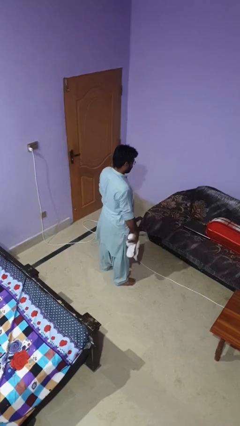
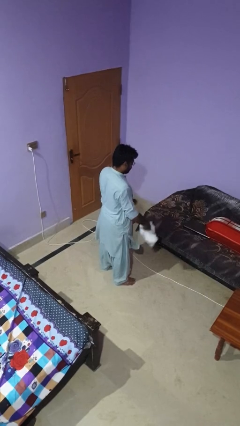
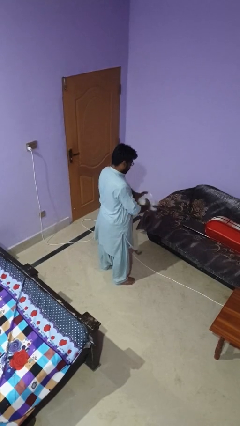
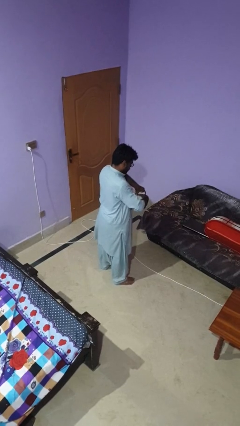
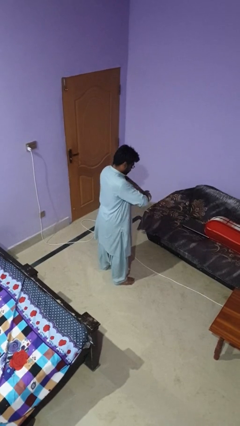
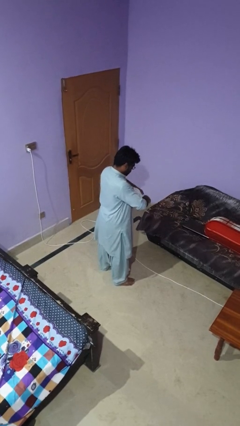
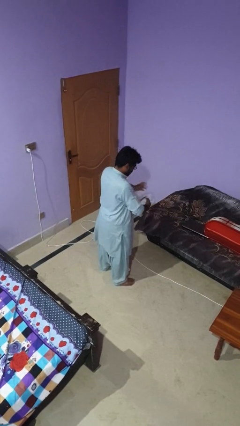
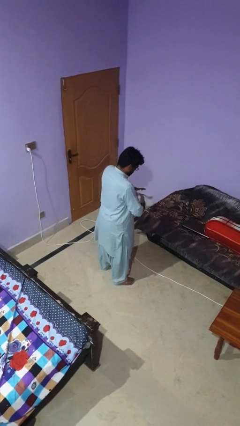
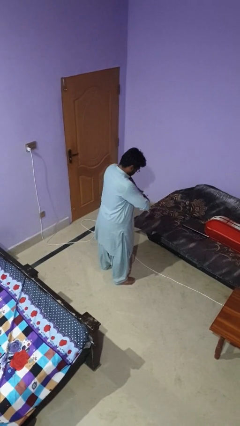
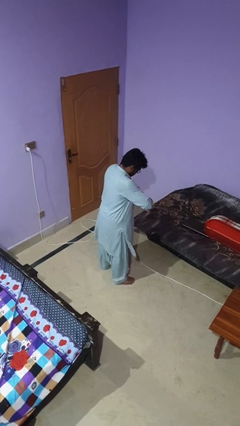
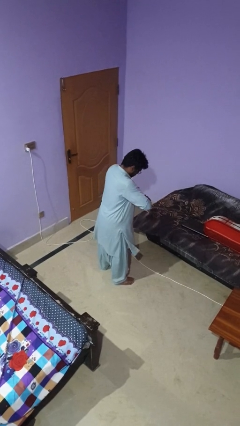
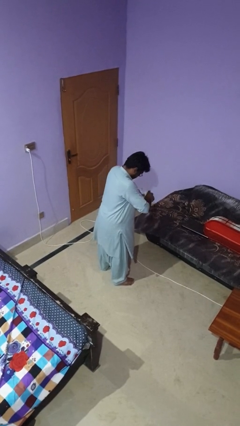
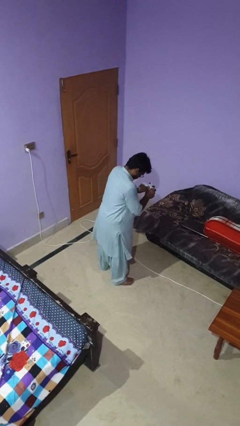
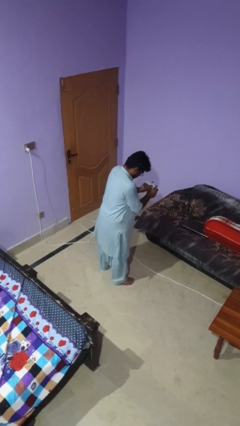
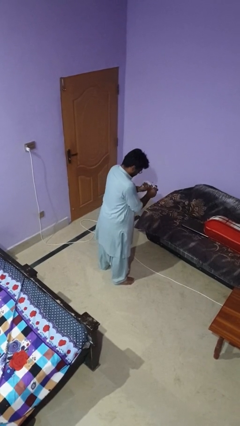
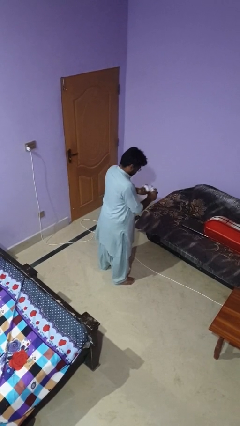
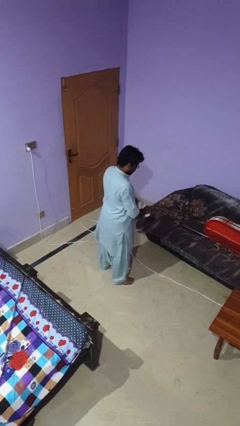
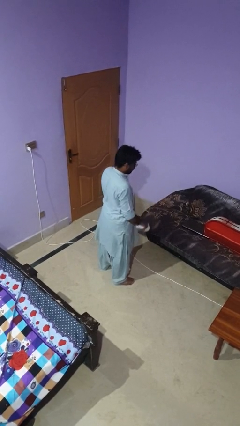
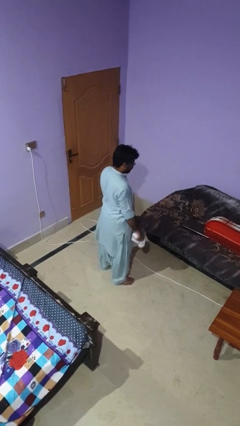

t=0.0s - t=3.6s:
person squeezes object

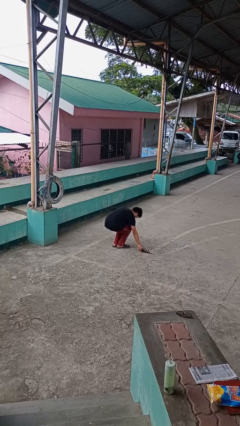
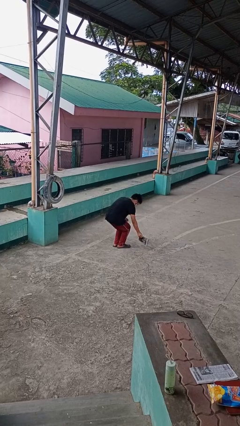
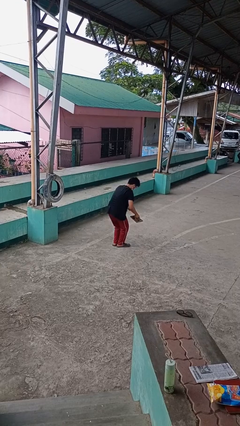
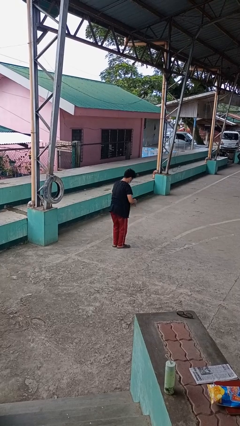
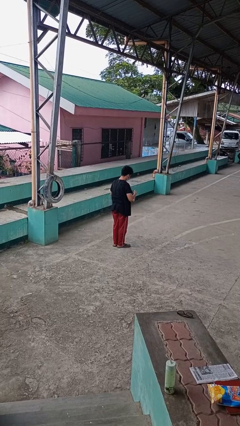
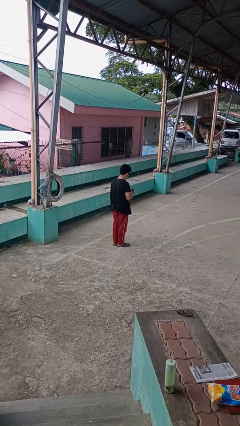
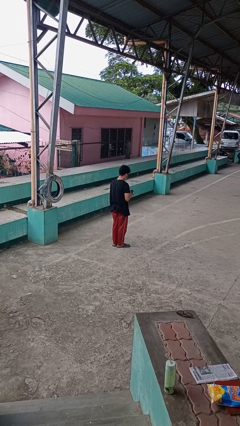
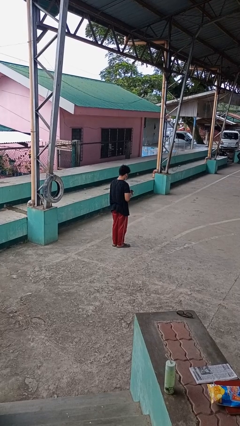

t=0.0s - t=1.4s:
person picks up object from floor

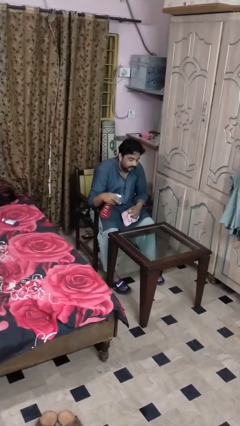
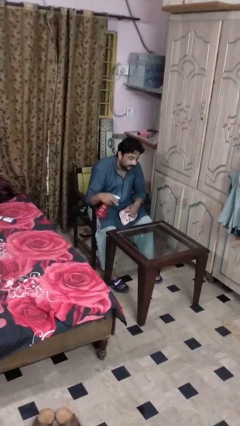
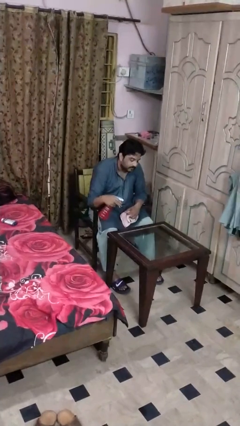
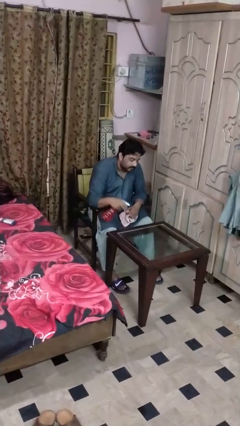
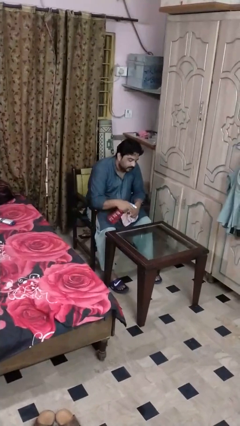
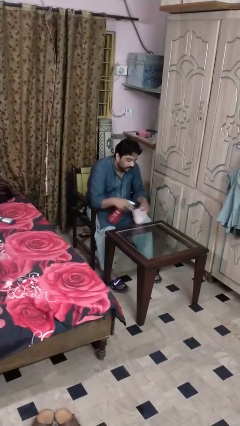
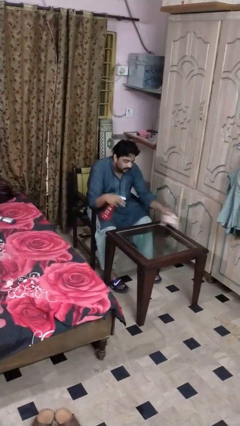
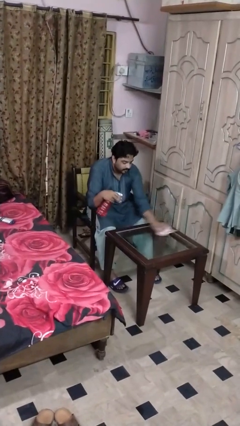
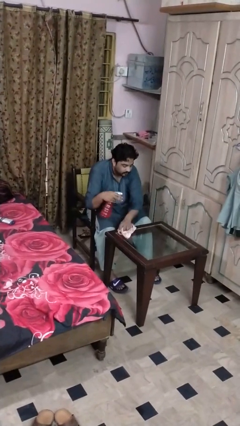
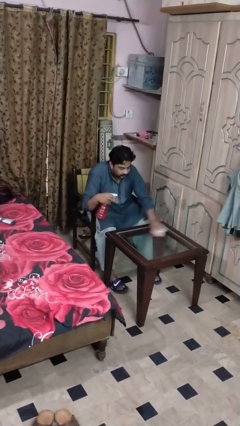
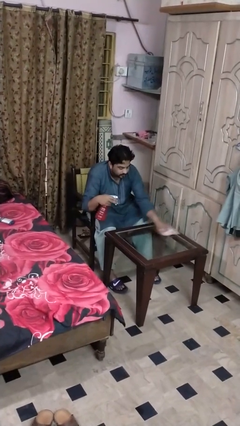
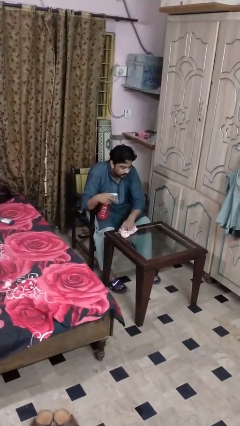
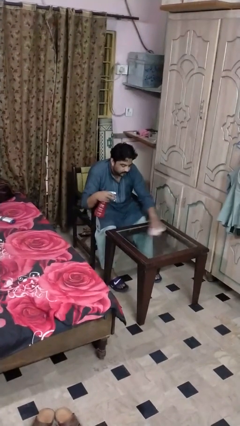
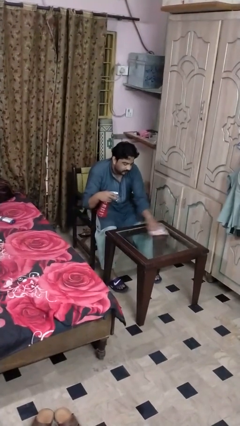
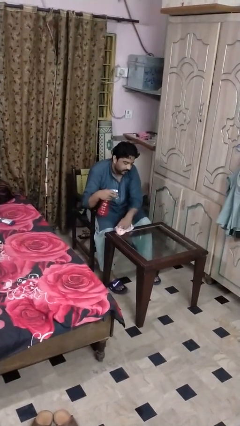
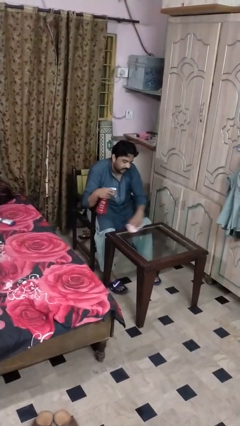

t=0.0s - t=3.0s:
person cleans table with rag

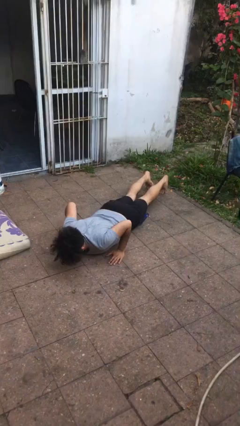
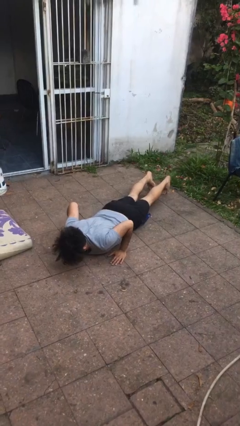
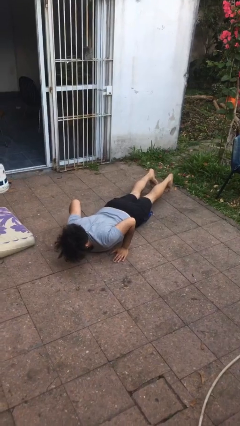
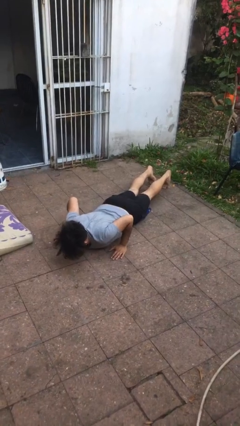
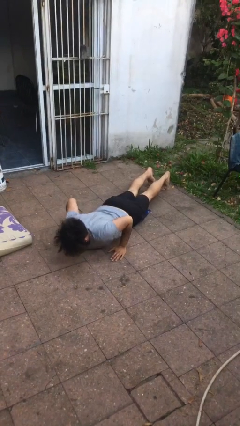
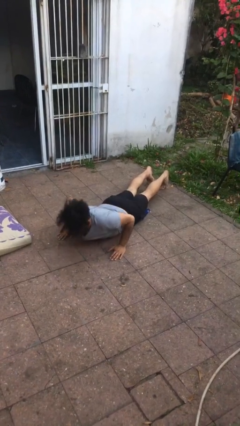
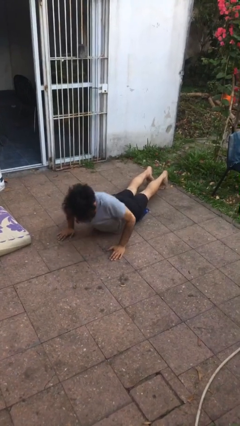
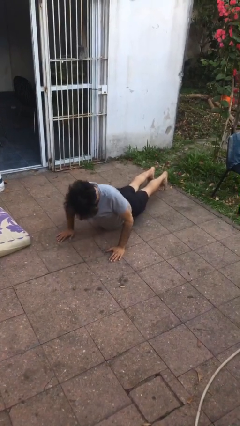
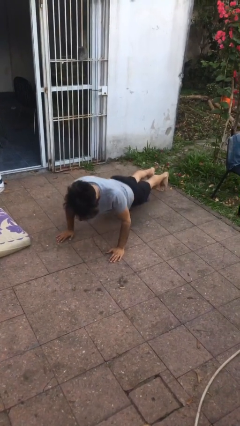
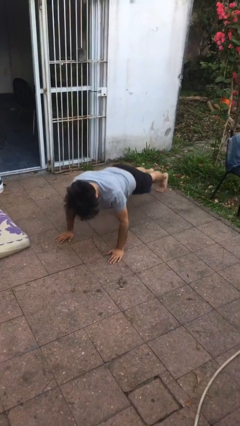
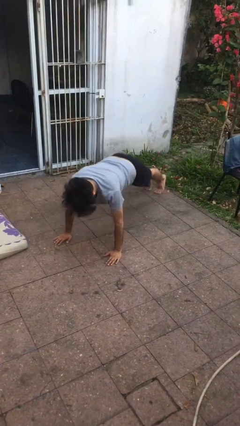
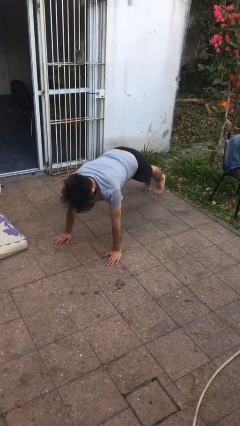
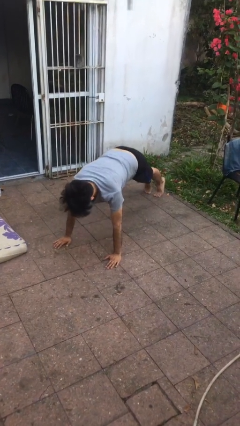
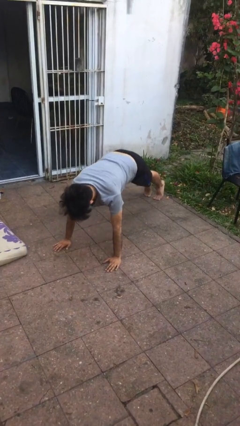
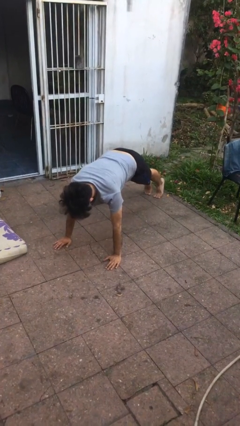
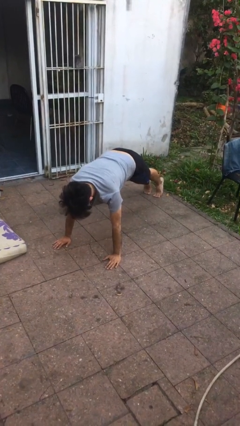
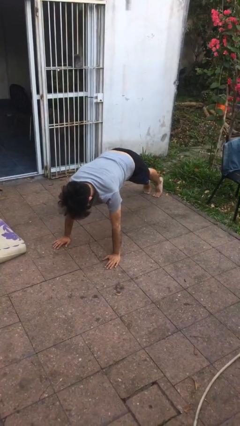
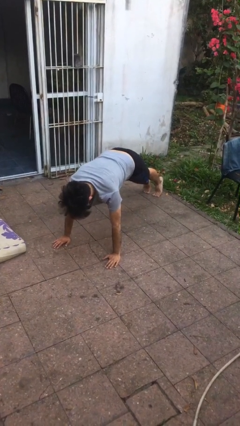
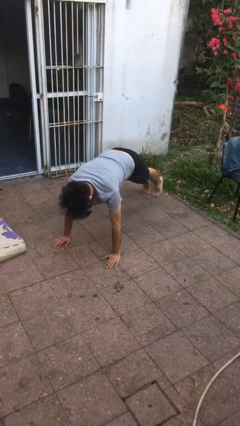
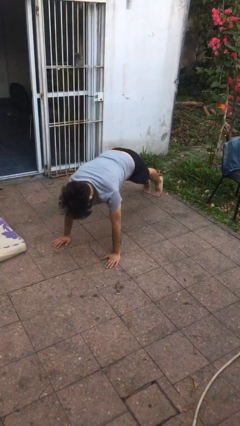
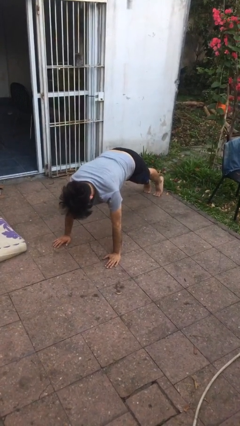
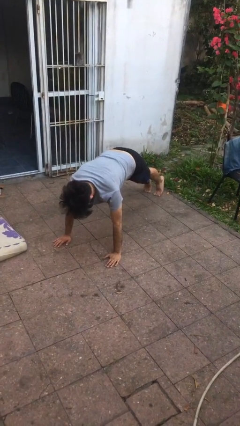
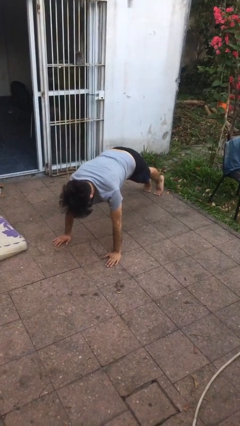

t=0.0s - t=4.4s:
person exercises with pushup

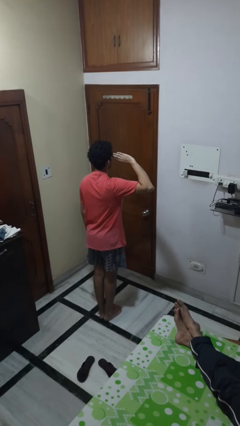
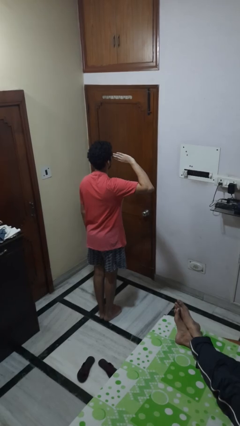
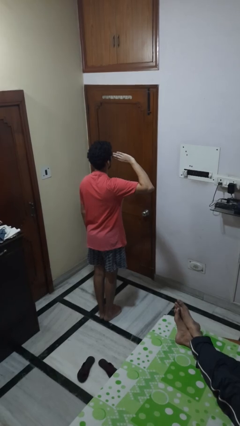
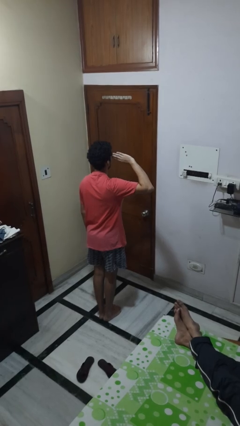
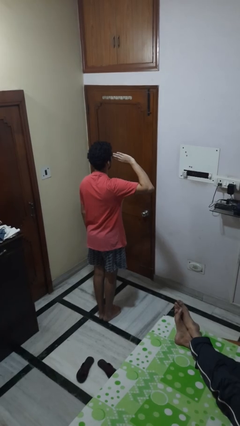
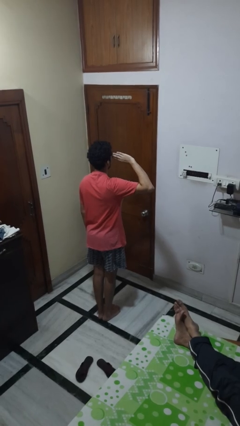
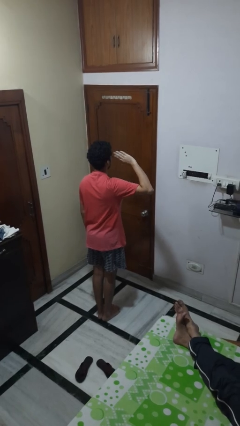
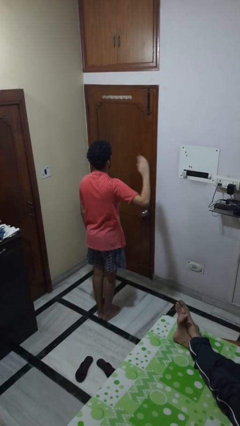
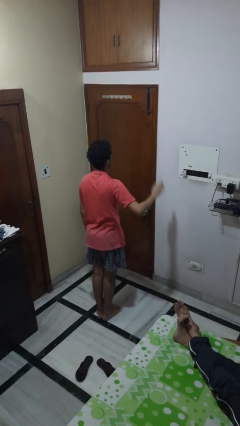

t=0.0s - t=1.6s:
person salutes

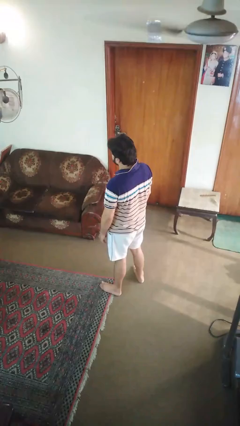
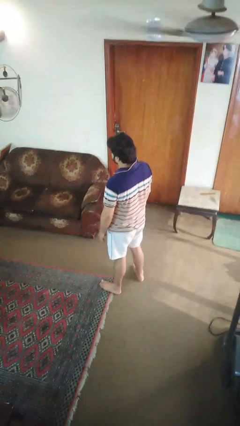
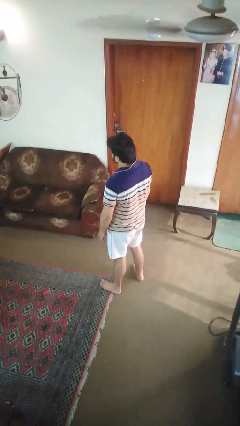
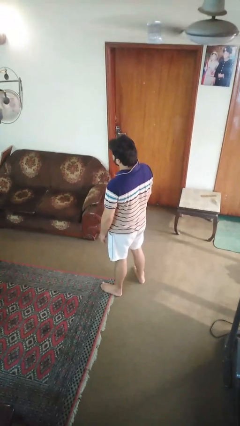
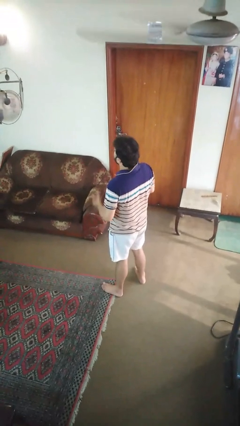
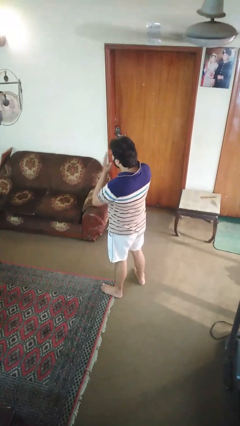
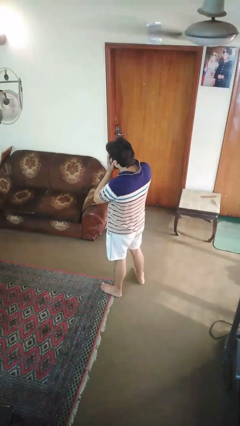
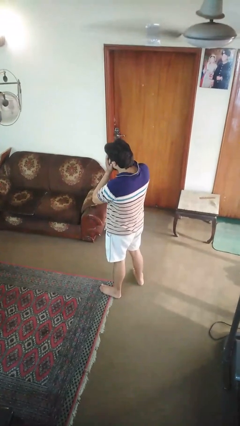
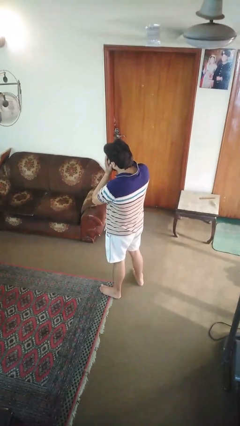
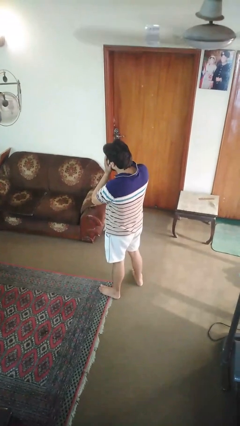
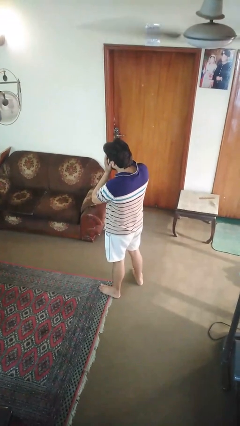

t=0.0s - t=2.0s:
person sneezes into hand

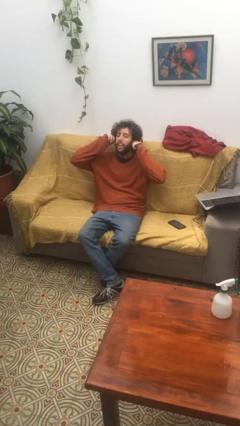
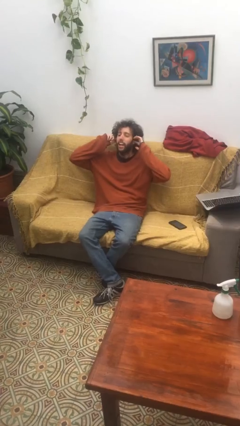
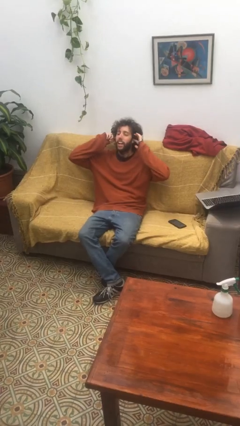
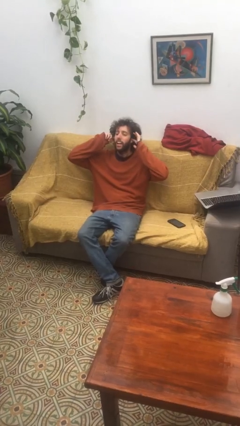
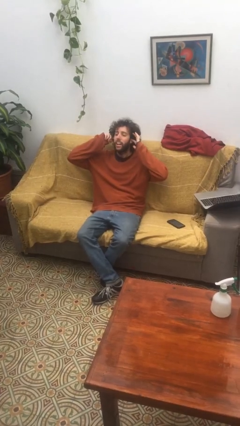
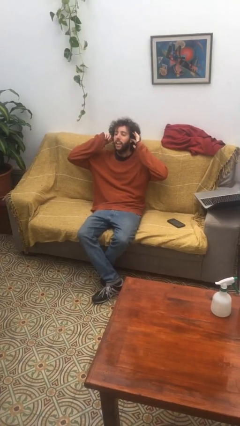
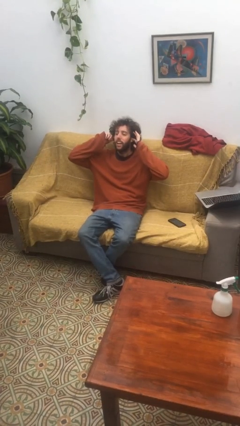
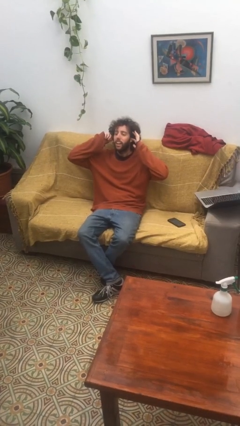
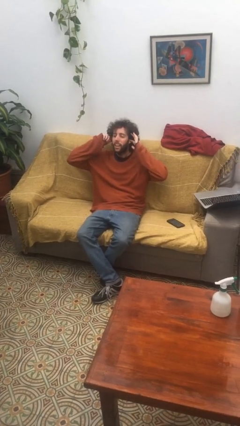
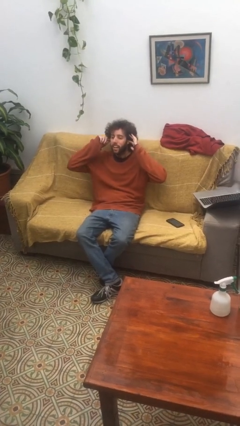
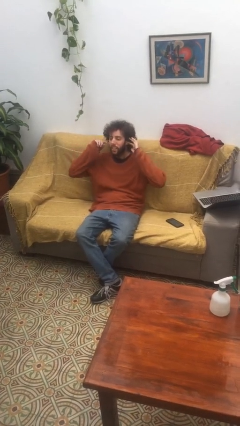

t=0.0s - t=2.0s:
person puts fingers in ear
